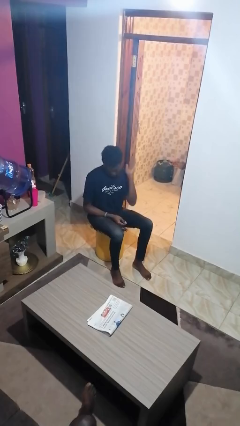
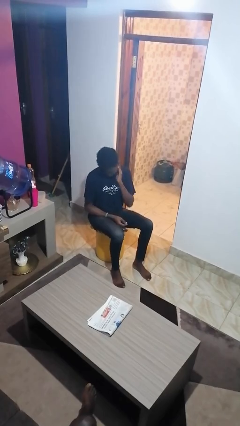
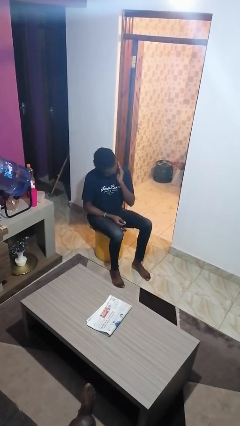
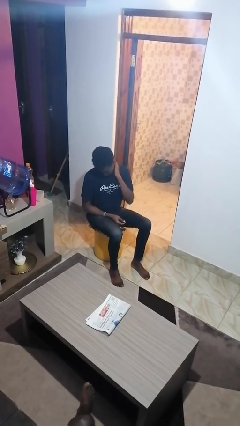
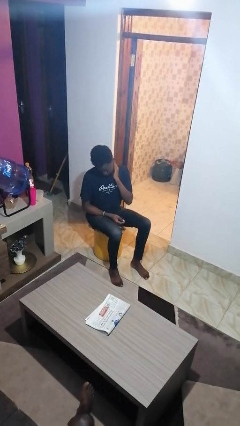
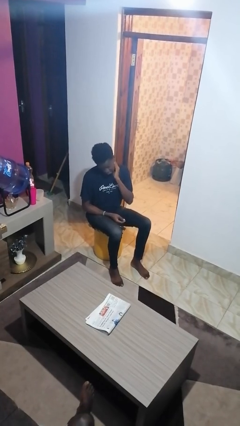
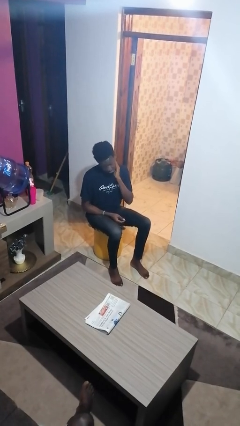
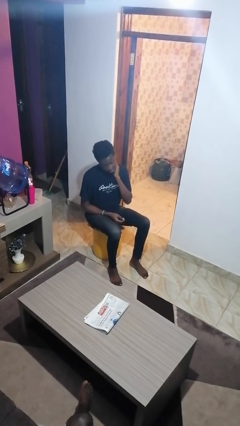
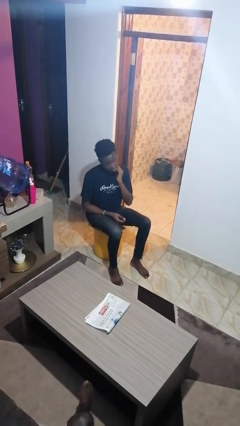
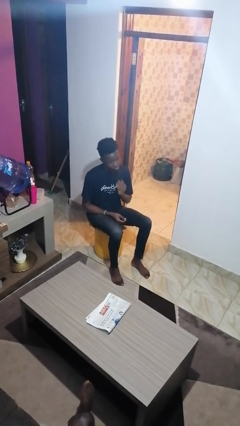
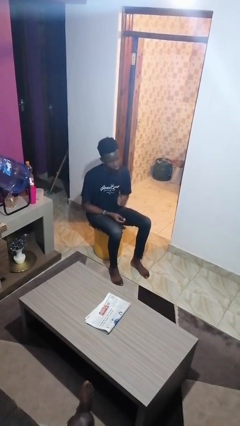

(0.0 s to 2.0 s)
person swats bug

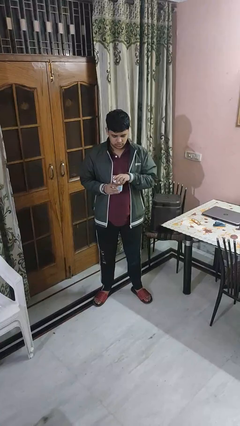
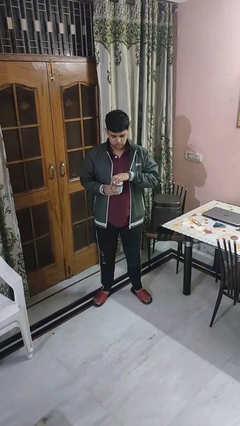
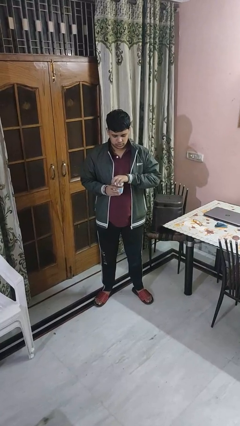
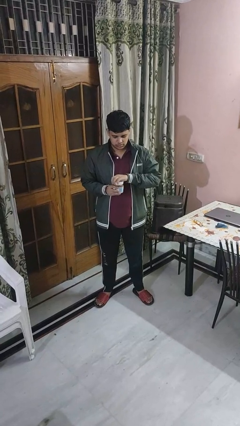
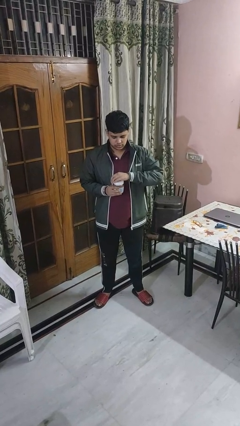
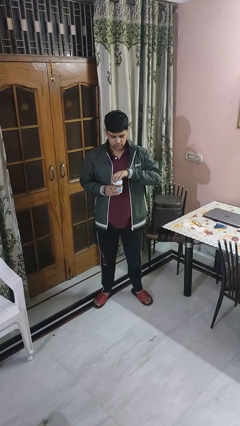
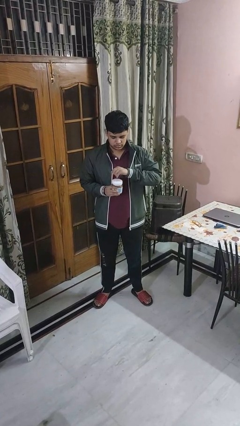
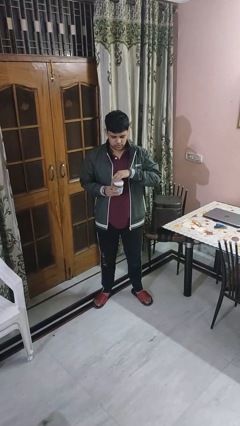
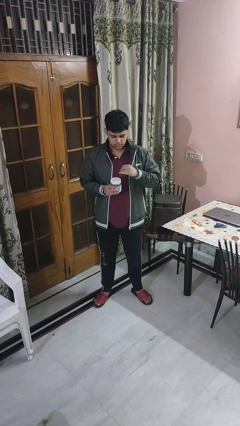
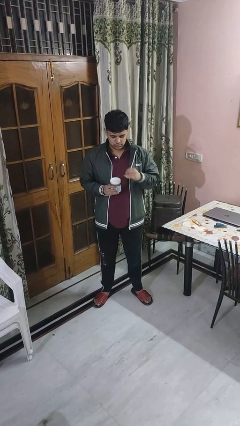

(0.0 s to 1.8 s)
person closes jar

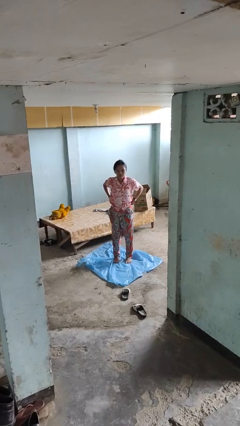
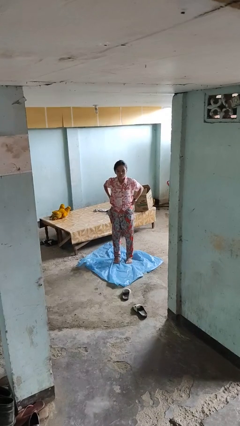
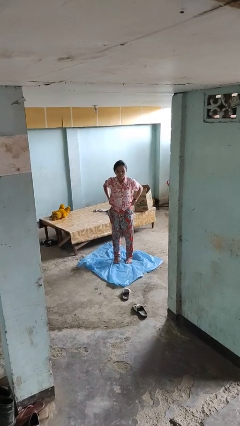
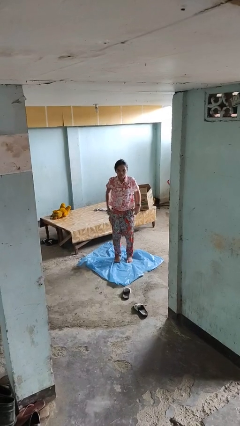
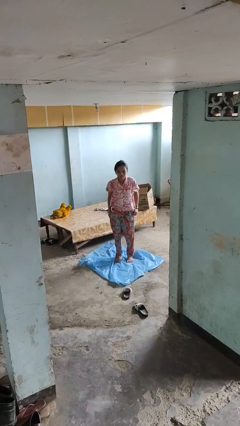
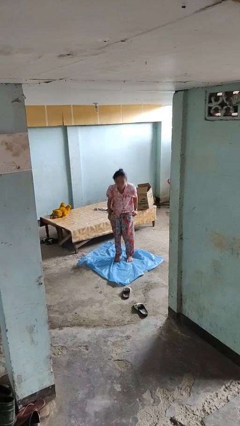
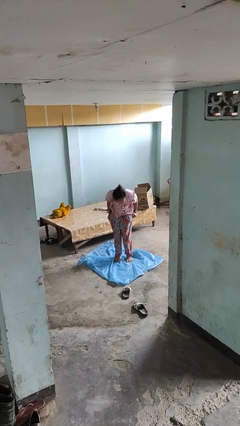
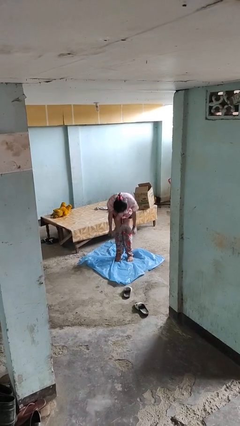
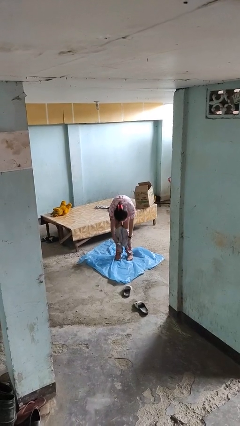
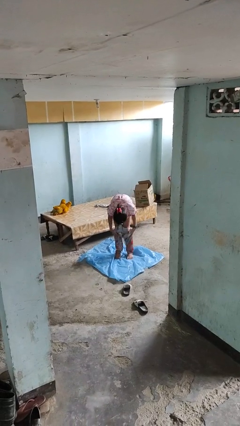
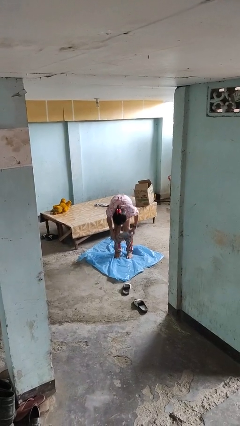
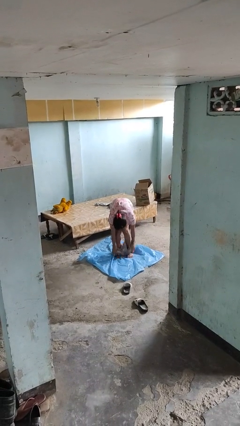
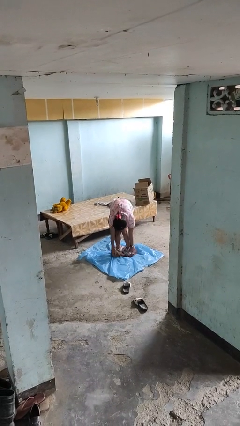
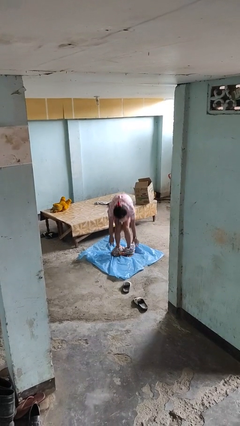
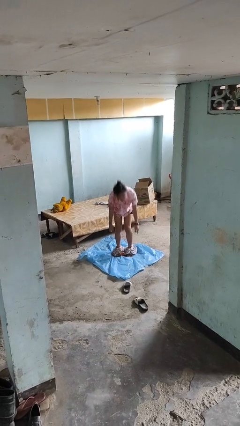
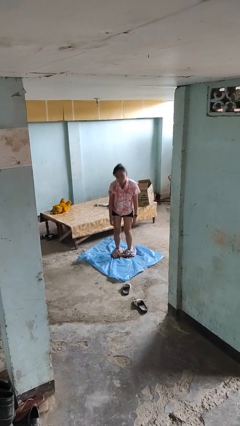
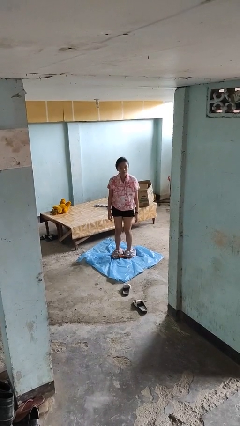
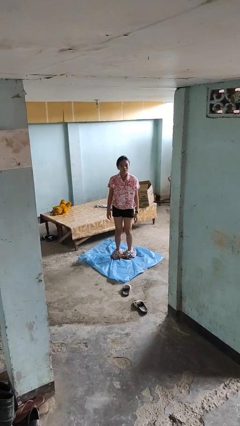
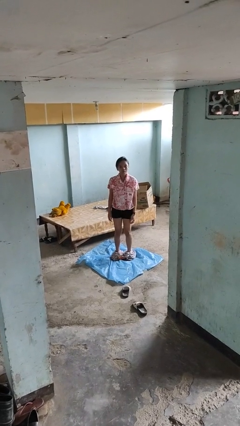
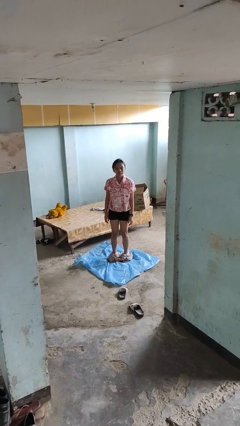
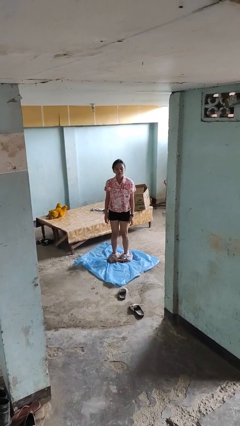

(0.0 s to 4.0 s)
person takes off pants

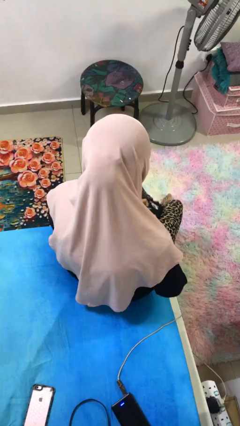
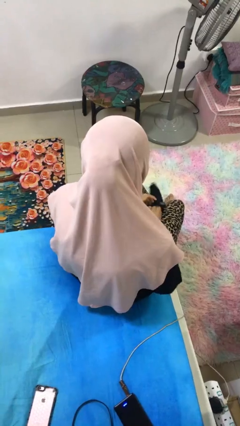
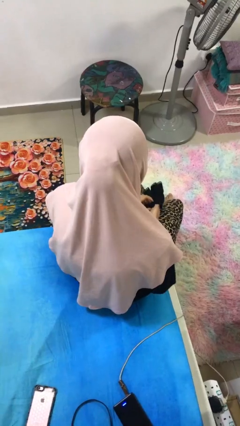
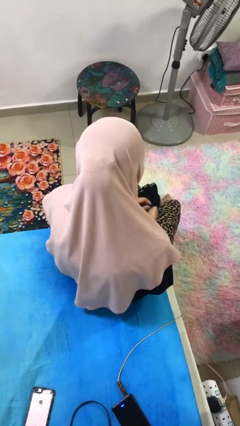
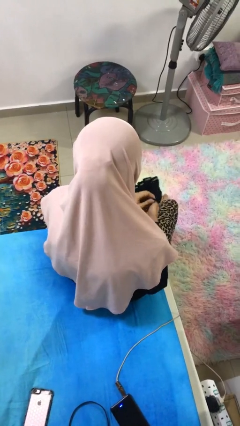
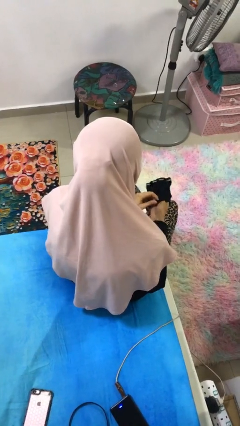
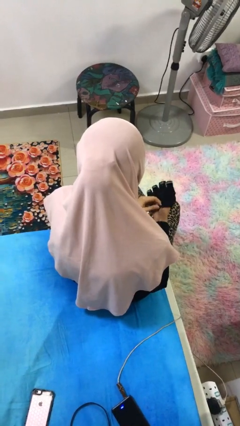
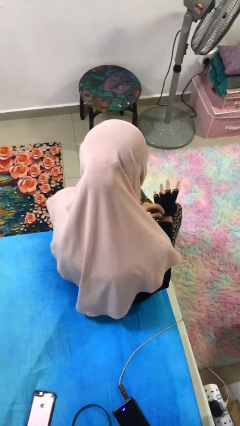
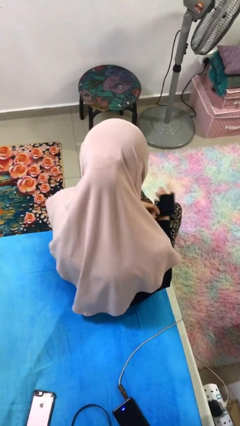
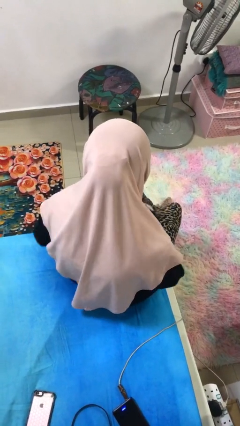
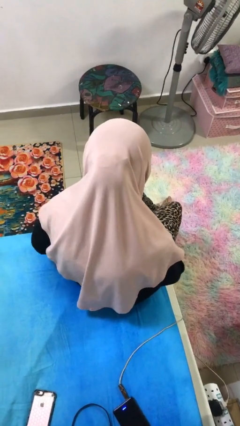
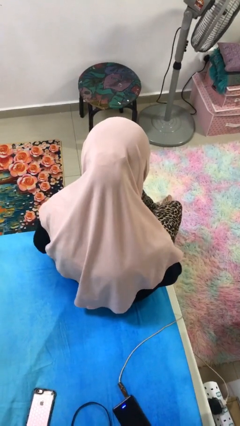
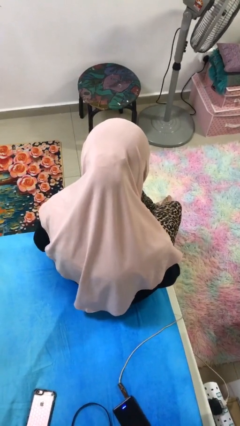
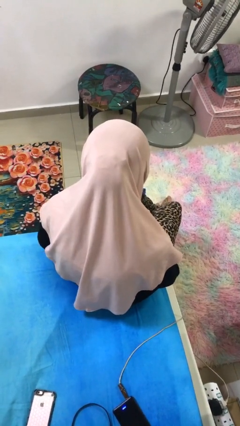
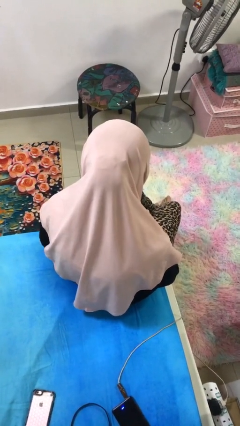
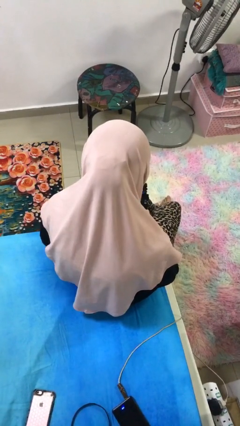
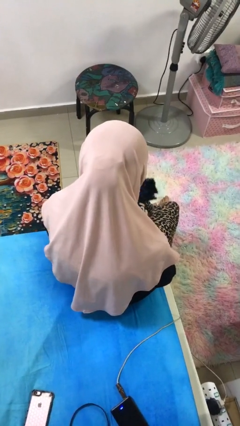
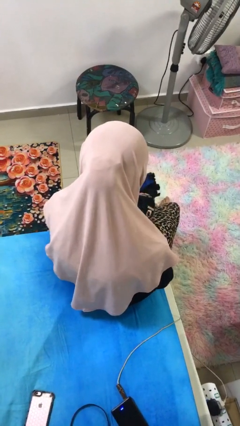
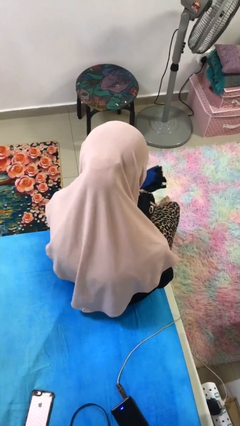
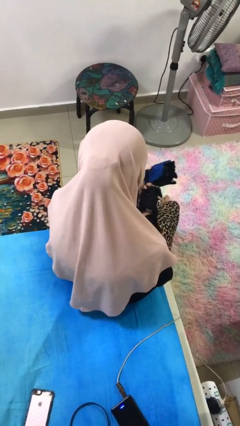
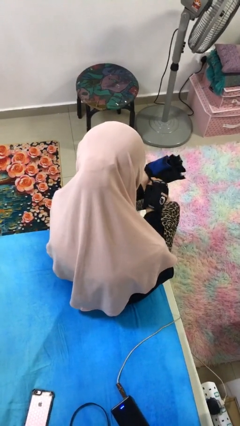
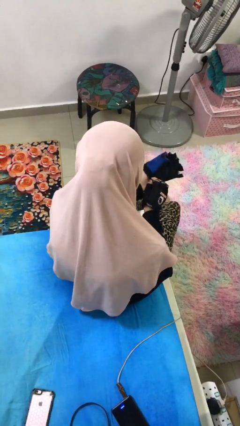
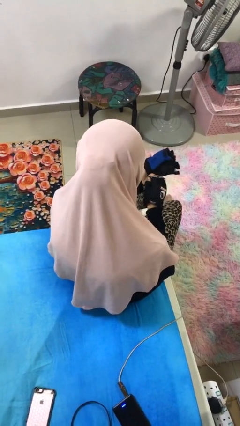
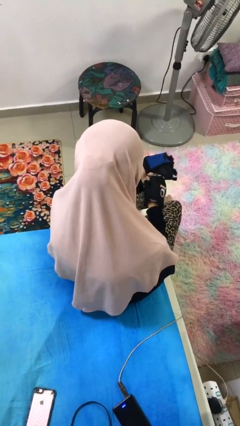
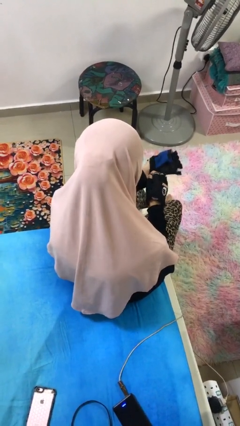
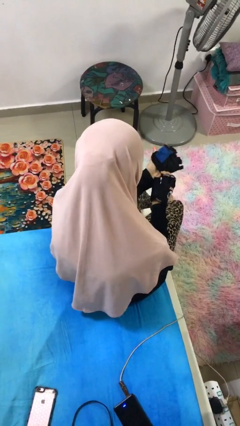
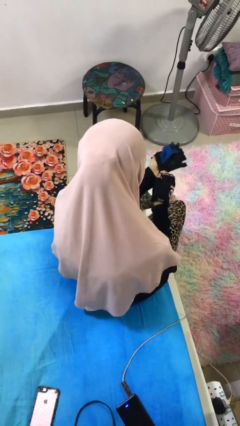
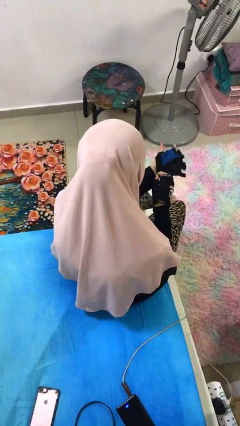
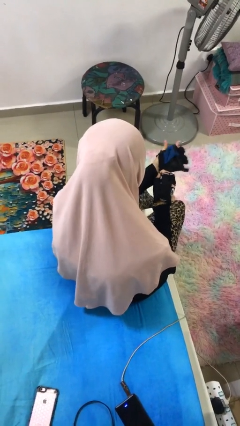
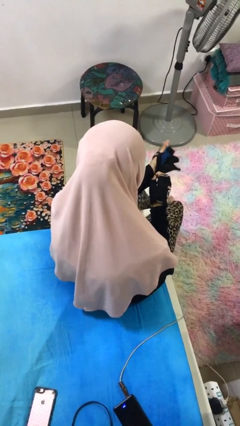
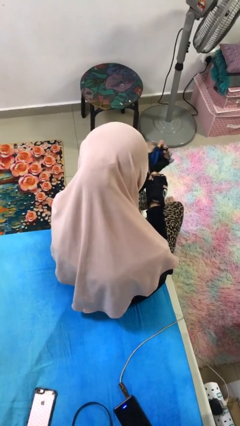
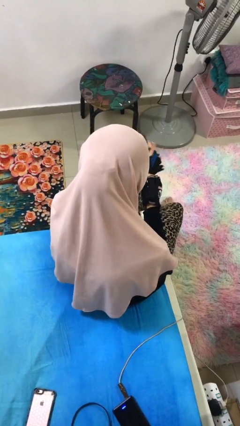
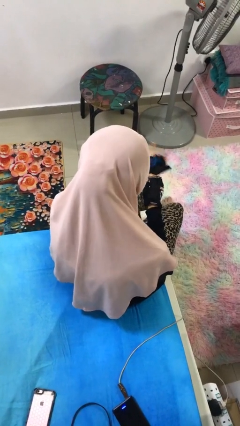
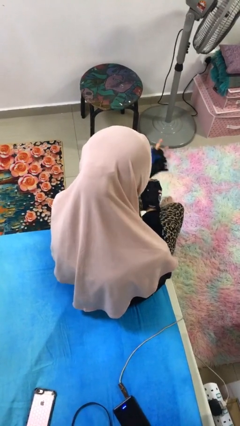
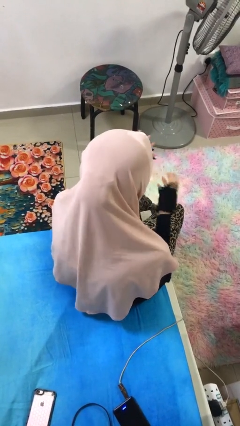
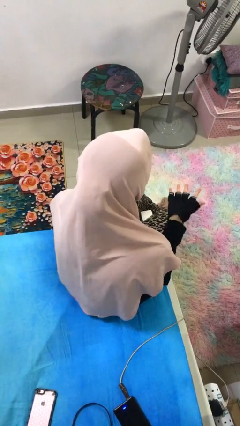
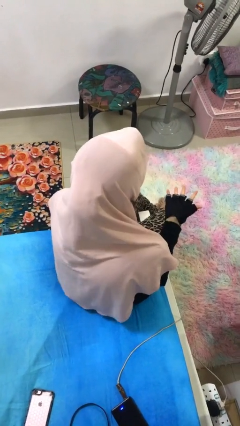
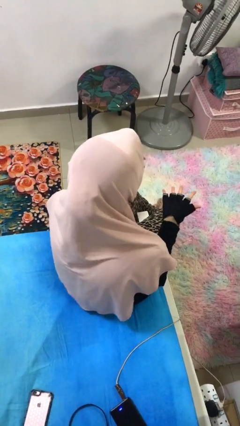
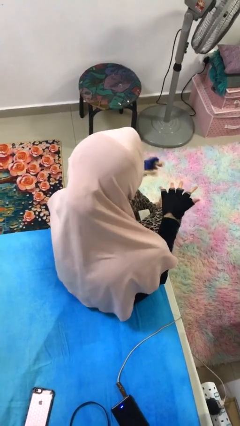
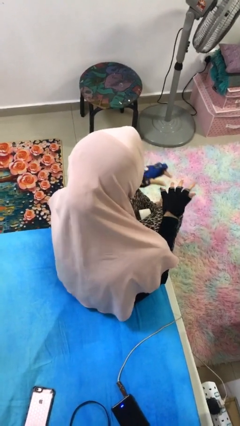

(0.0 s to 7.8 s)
person puts on gloves

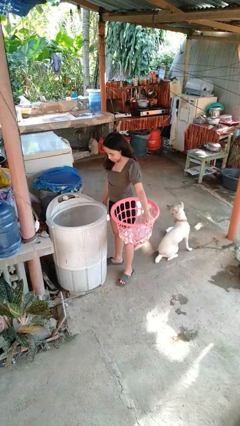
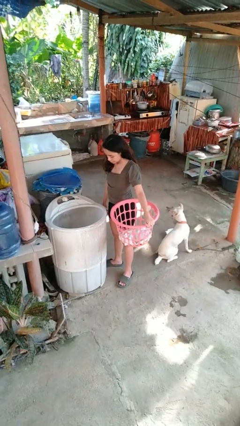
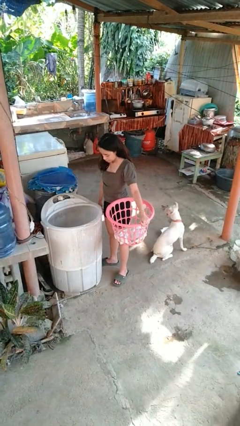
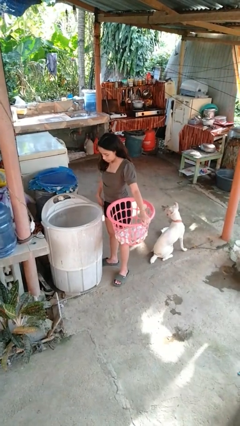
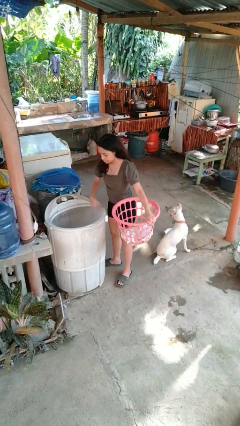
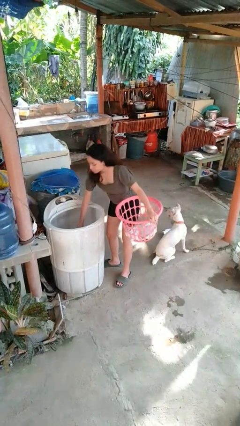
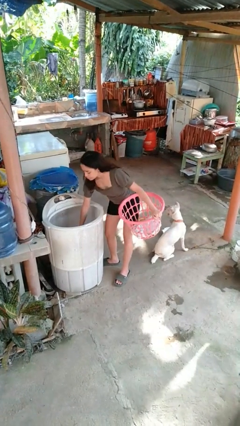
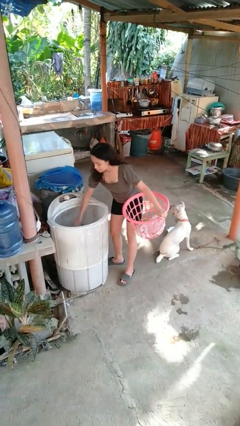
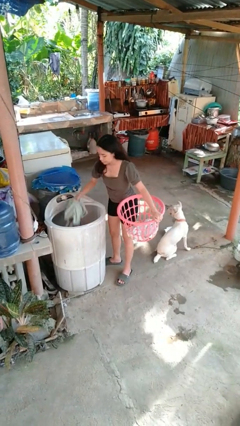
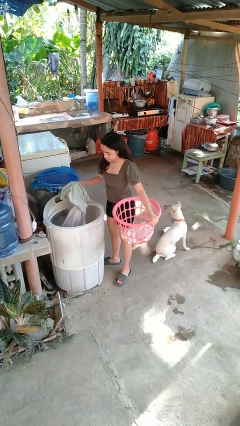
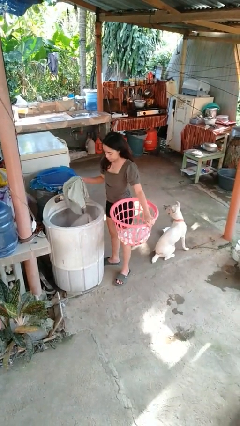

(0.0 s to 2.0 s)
person unloads dryer
